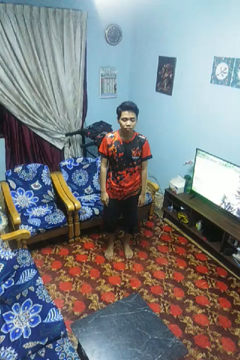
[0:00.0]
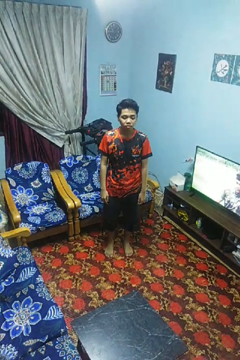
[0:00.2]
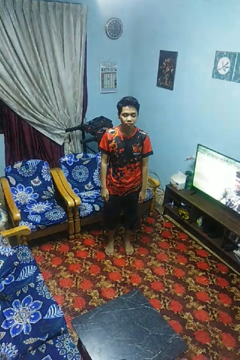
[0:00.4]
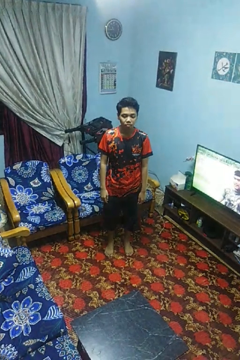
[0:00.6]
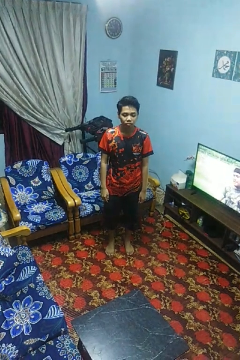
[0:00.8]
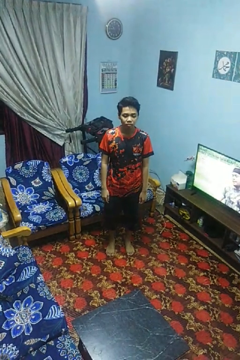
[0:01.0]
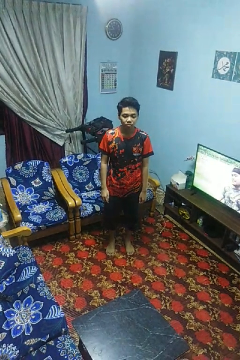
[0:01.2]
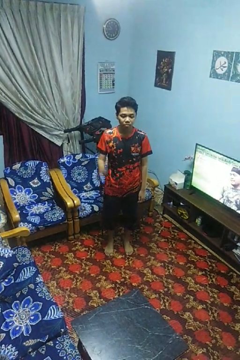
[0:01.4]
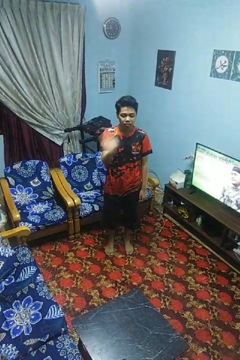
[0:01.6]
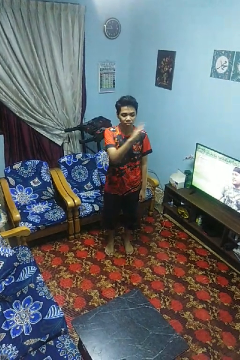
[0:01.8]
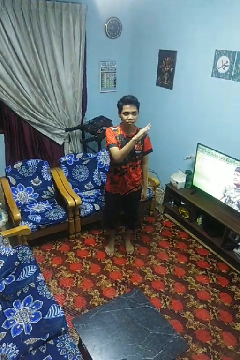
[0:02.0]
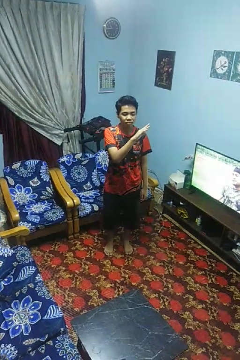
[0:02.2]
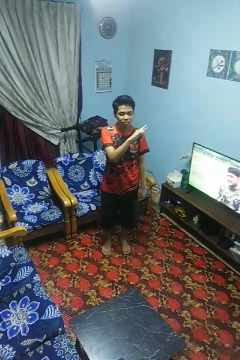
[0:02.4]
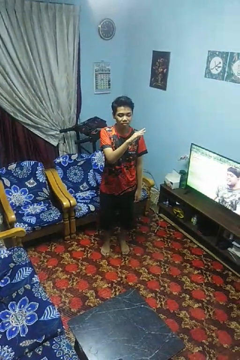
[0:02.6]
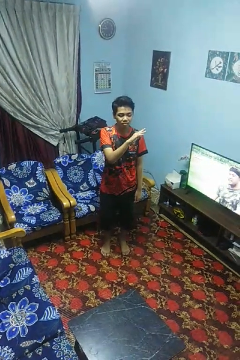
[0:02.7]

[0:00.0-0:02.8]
person gestures swipe left

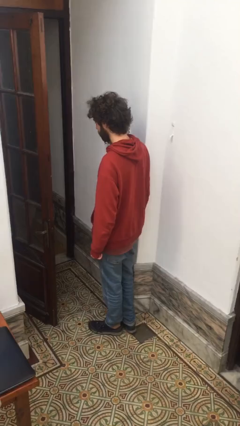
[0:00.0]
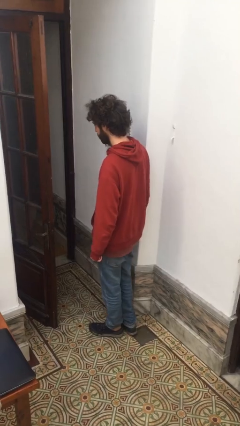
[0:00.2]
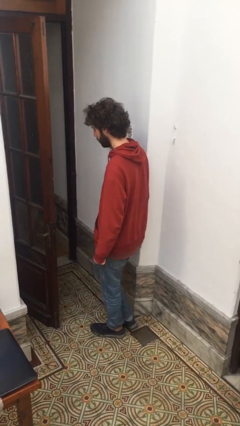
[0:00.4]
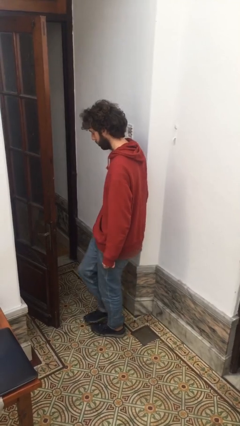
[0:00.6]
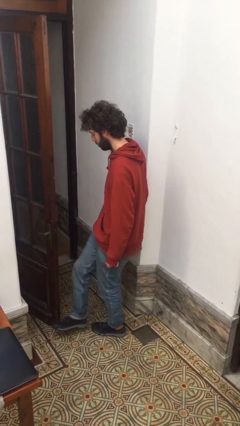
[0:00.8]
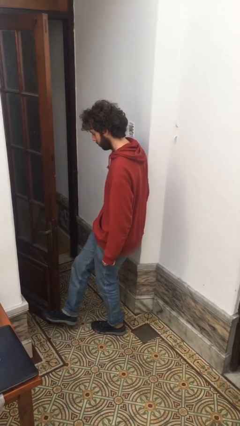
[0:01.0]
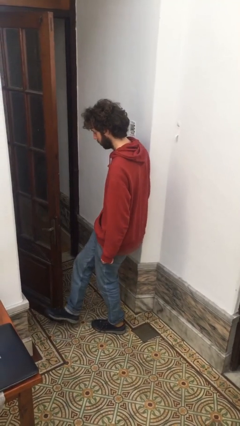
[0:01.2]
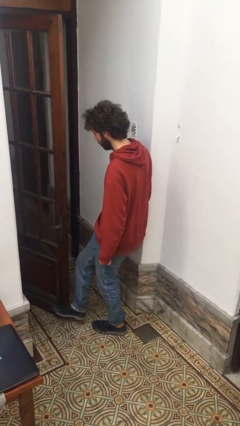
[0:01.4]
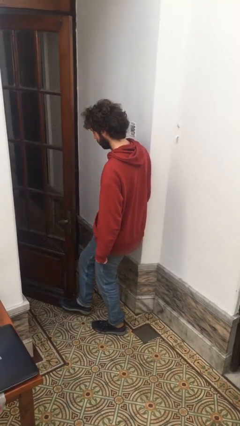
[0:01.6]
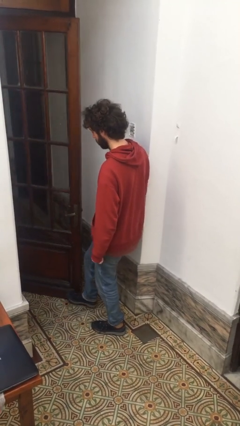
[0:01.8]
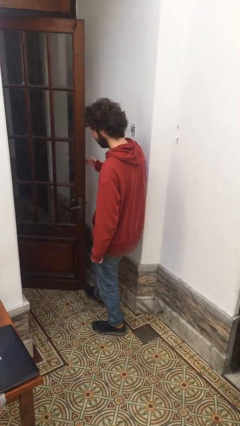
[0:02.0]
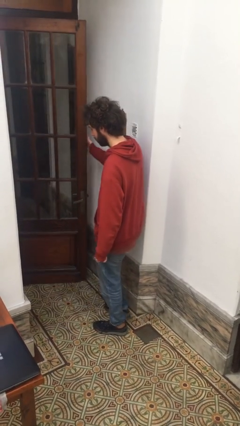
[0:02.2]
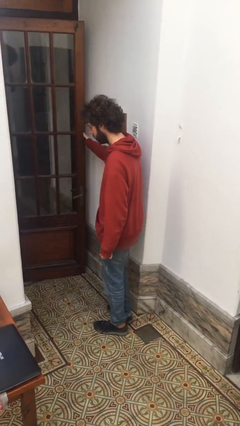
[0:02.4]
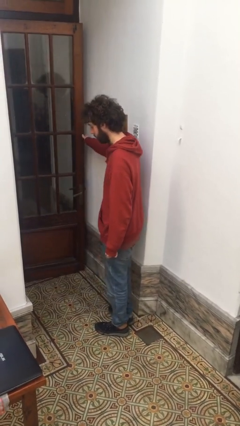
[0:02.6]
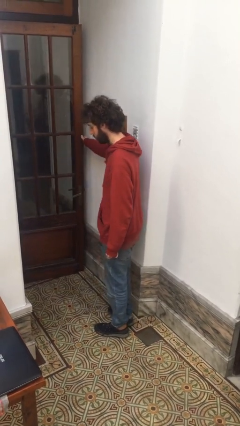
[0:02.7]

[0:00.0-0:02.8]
person closes door with foot

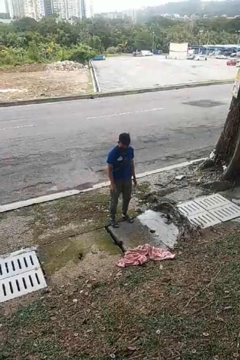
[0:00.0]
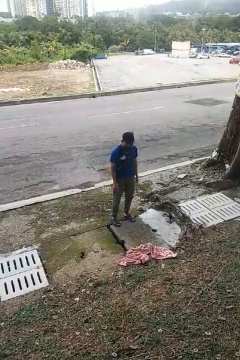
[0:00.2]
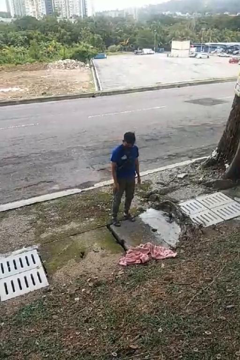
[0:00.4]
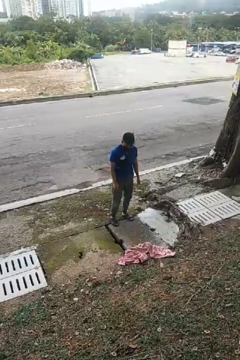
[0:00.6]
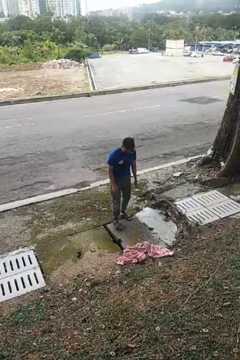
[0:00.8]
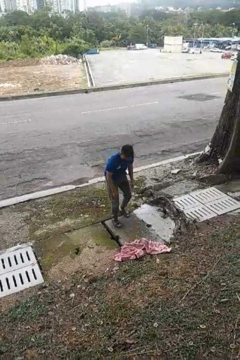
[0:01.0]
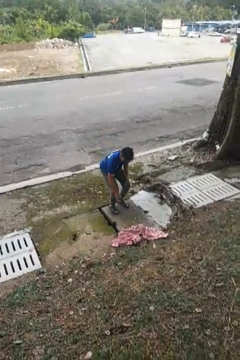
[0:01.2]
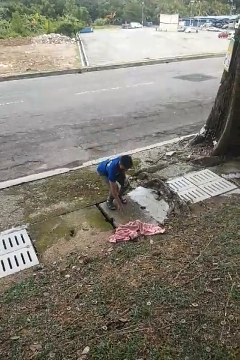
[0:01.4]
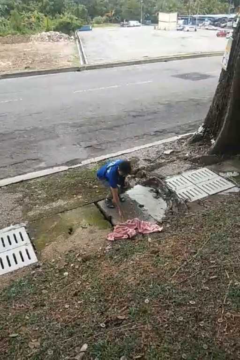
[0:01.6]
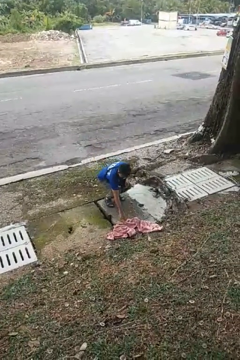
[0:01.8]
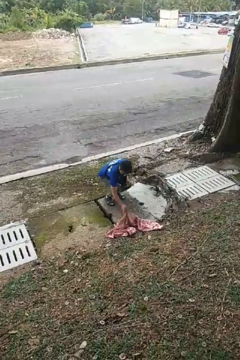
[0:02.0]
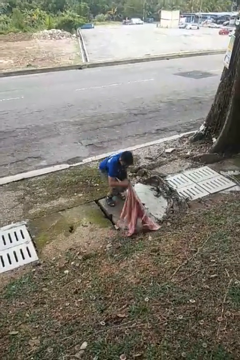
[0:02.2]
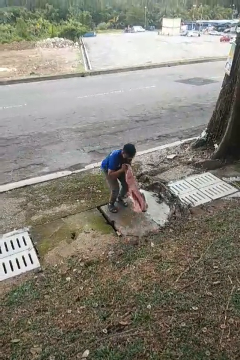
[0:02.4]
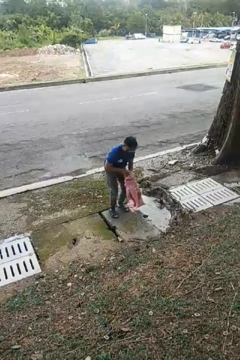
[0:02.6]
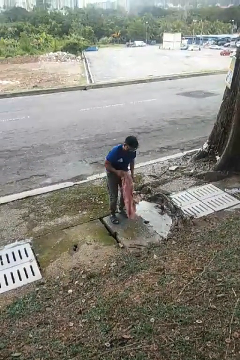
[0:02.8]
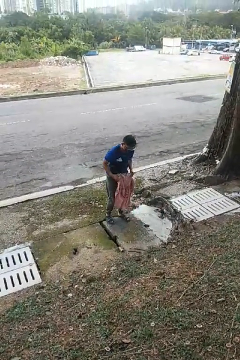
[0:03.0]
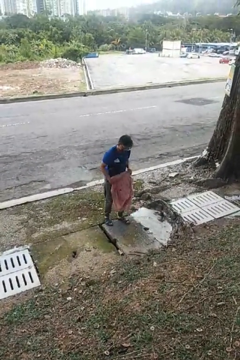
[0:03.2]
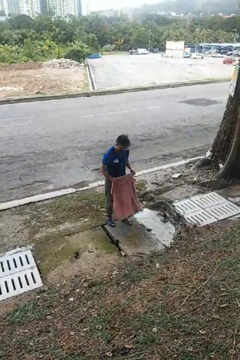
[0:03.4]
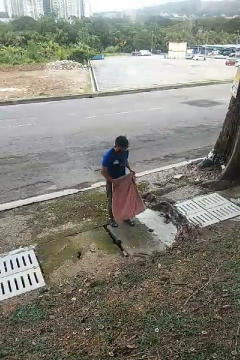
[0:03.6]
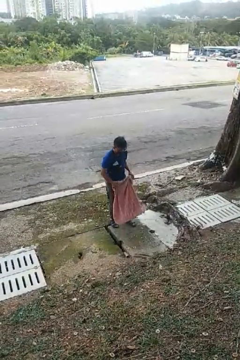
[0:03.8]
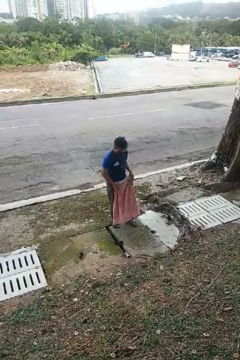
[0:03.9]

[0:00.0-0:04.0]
person picks up object from floor

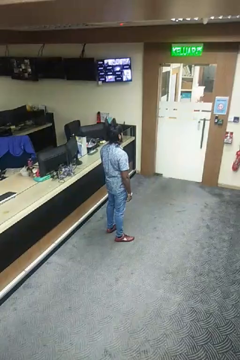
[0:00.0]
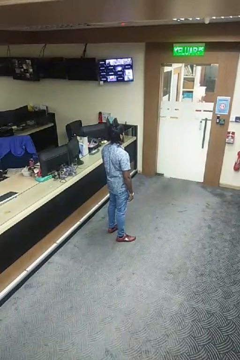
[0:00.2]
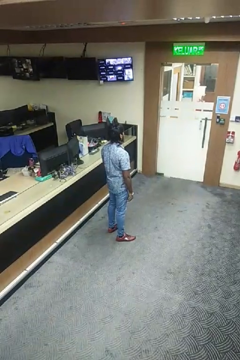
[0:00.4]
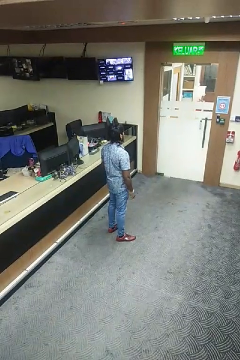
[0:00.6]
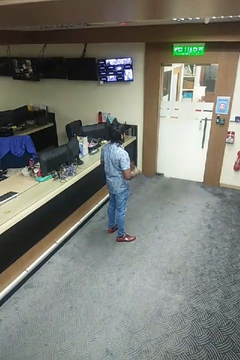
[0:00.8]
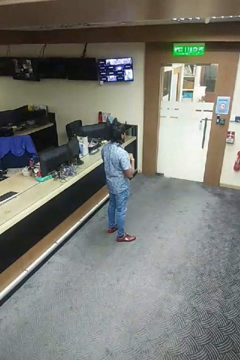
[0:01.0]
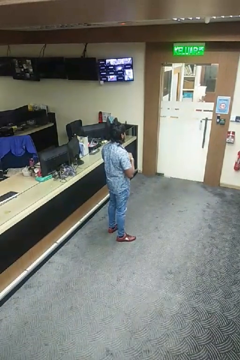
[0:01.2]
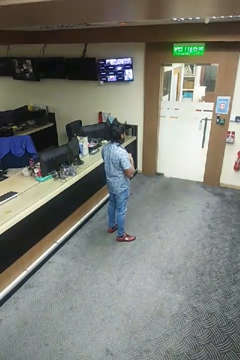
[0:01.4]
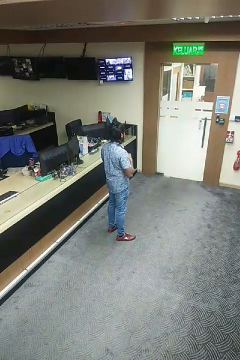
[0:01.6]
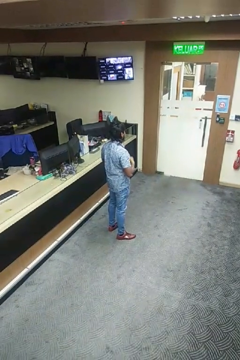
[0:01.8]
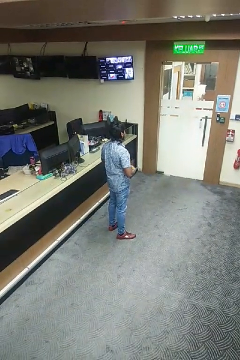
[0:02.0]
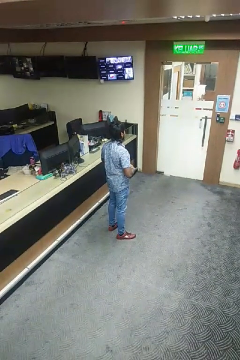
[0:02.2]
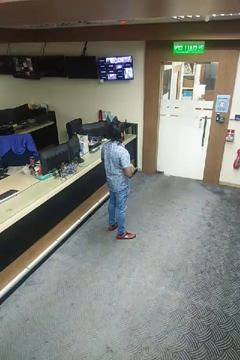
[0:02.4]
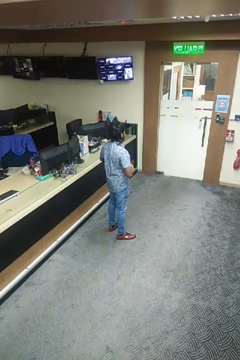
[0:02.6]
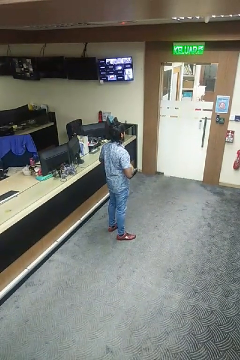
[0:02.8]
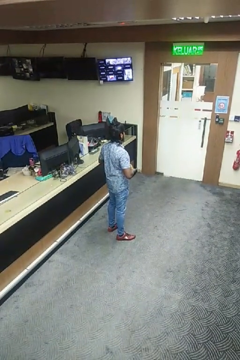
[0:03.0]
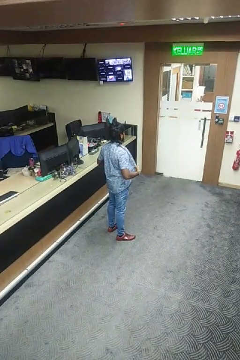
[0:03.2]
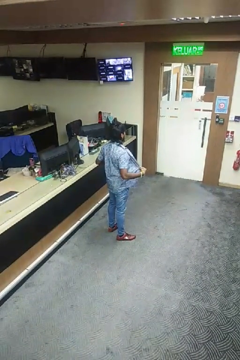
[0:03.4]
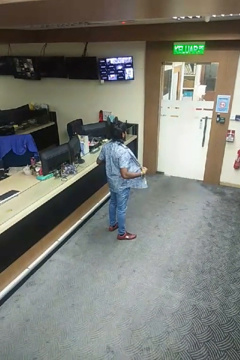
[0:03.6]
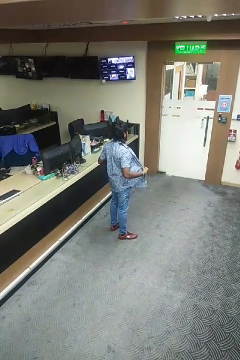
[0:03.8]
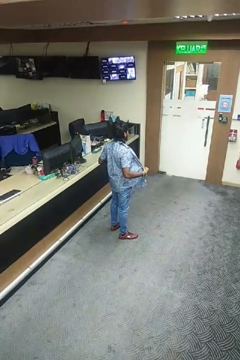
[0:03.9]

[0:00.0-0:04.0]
person unbuttons shirt

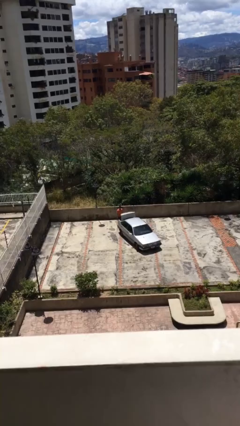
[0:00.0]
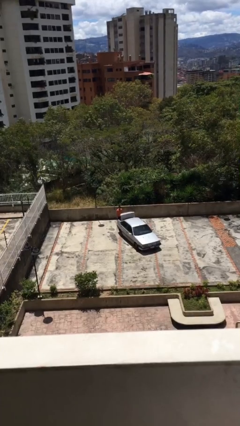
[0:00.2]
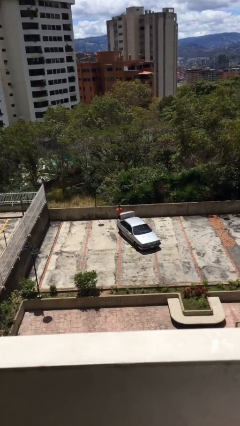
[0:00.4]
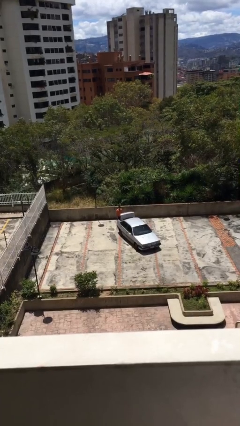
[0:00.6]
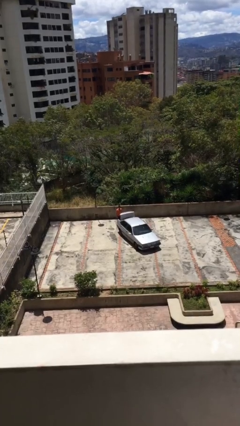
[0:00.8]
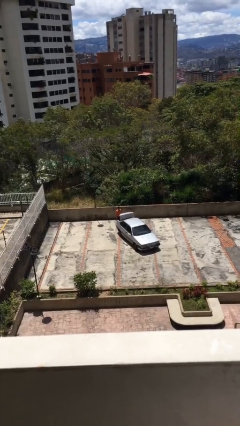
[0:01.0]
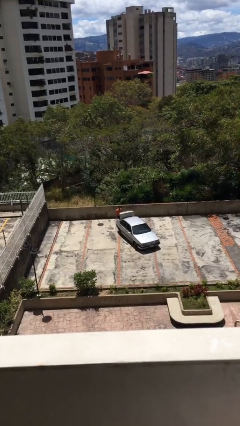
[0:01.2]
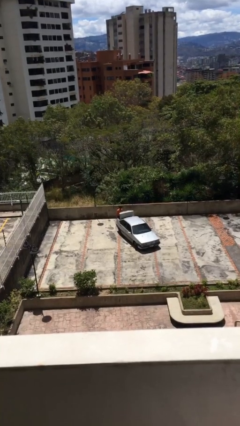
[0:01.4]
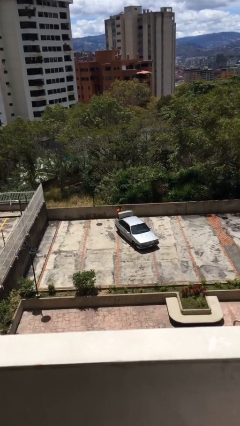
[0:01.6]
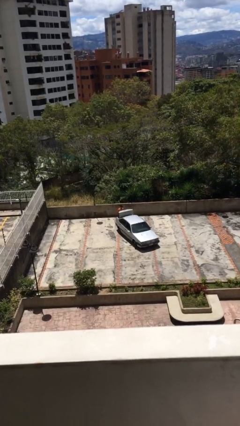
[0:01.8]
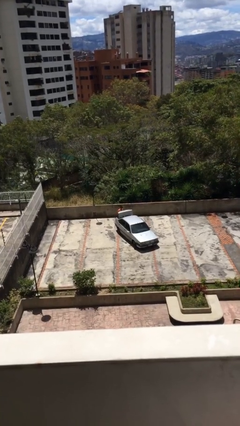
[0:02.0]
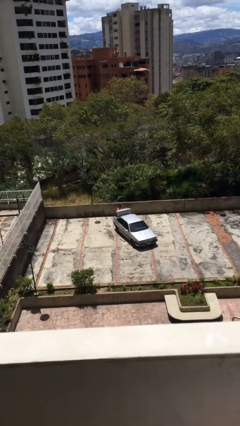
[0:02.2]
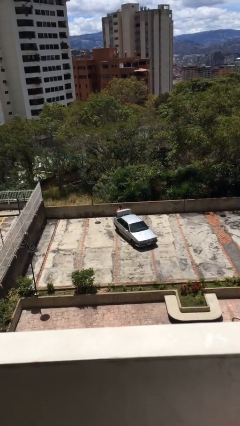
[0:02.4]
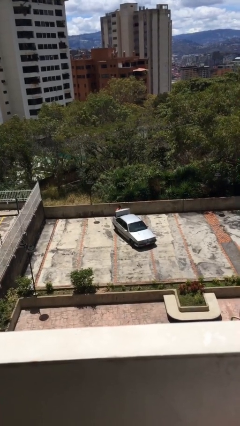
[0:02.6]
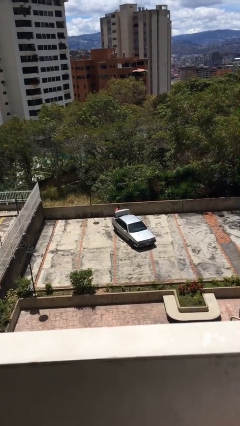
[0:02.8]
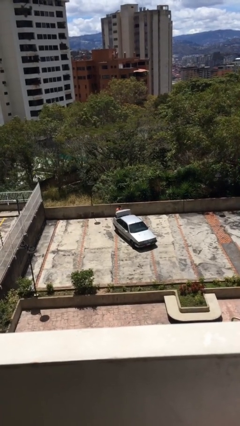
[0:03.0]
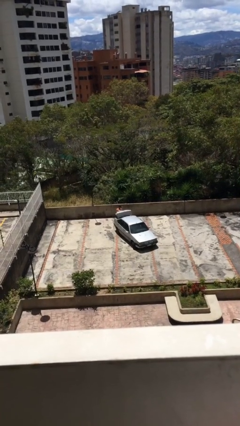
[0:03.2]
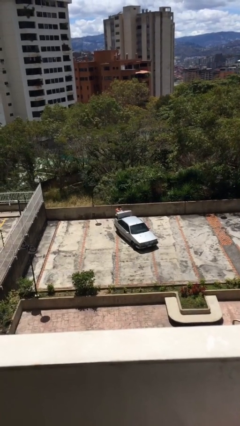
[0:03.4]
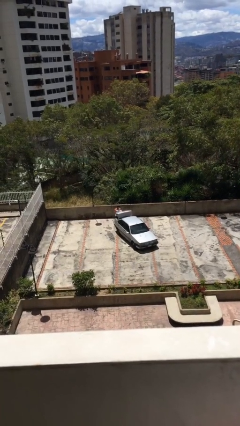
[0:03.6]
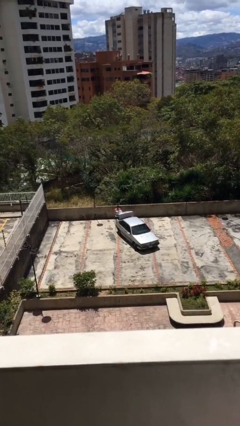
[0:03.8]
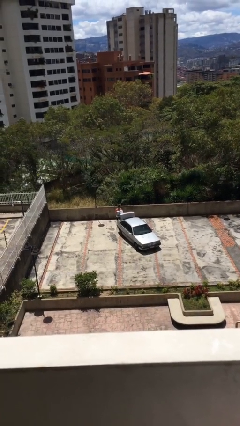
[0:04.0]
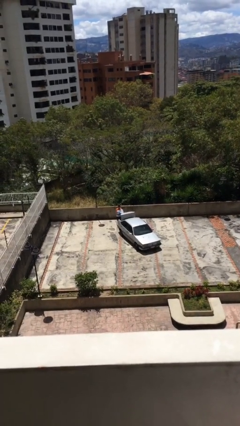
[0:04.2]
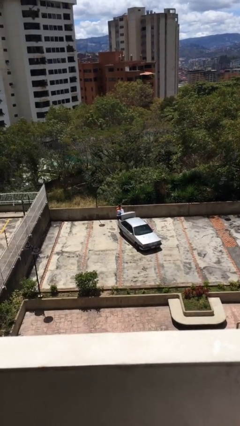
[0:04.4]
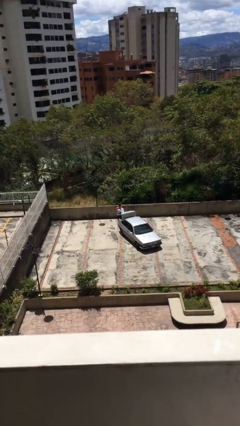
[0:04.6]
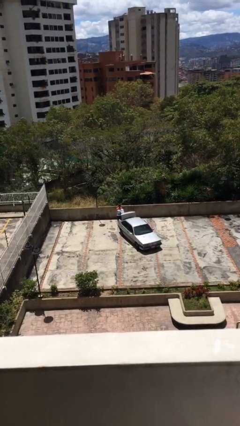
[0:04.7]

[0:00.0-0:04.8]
person unloads car

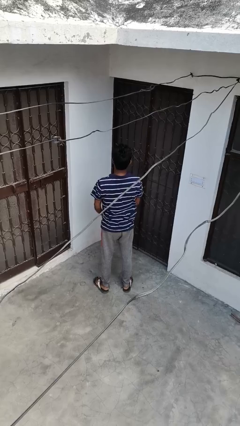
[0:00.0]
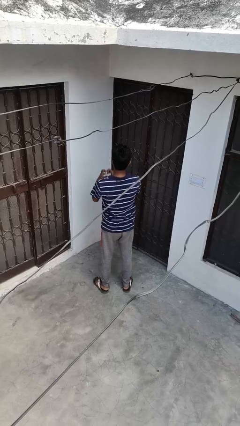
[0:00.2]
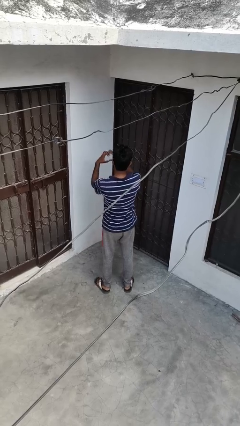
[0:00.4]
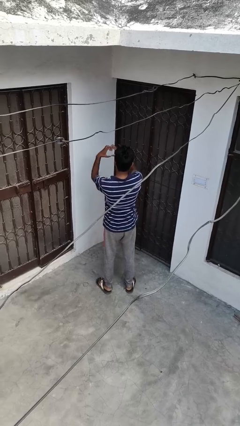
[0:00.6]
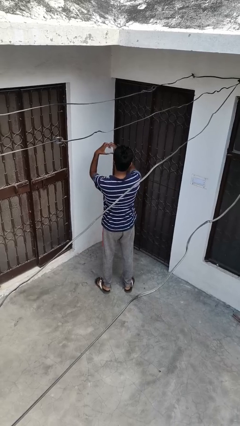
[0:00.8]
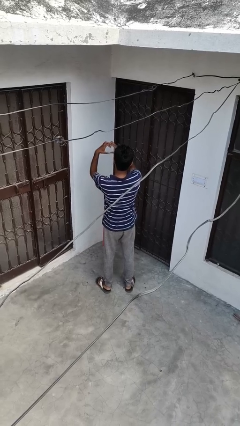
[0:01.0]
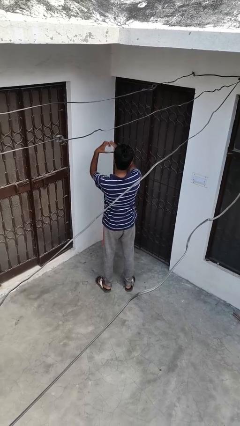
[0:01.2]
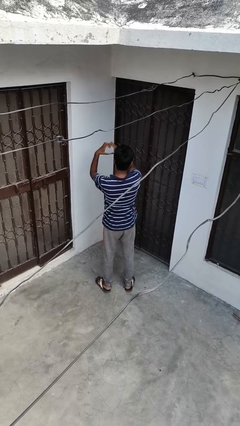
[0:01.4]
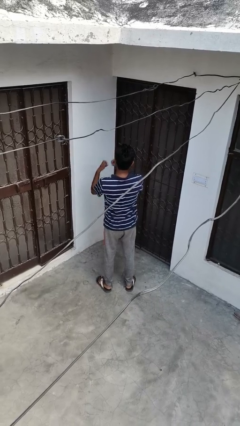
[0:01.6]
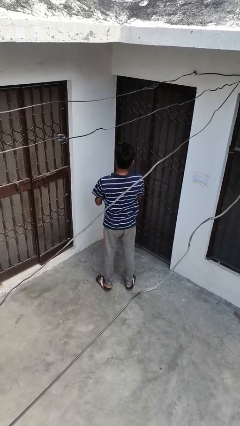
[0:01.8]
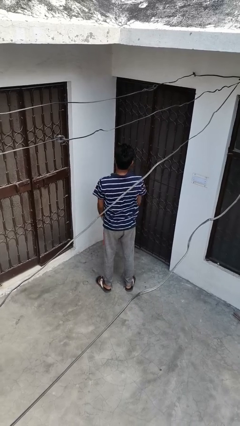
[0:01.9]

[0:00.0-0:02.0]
person gestures heart
